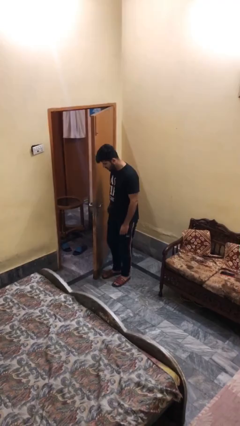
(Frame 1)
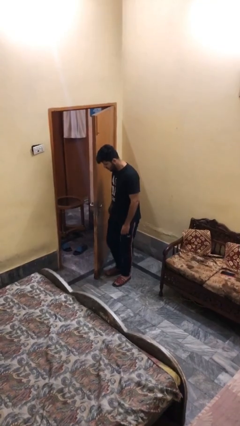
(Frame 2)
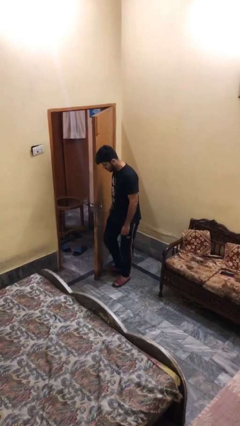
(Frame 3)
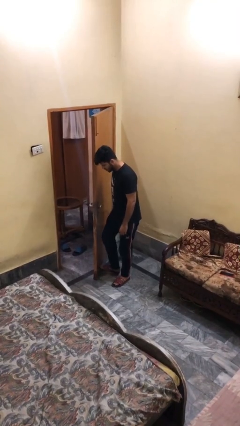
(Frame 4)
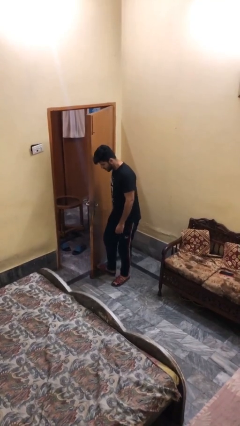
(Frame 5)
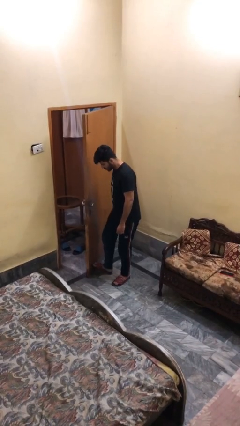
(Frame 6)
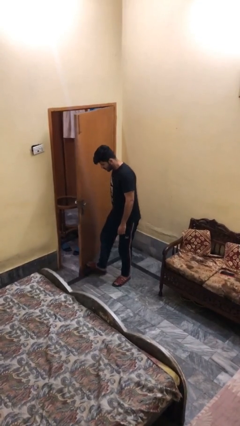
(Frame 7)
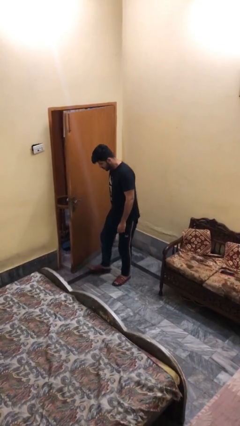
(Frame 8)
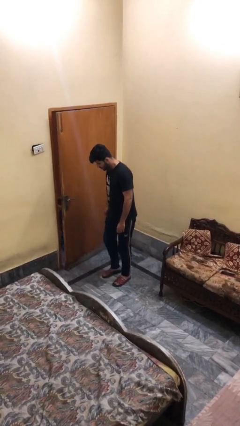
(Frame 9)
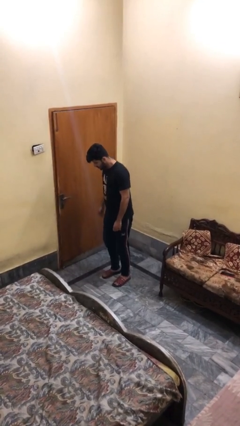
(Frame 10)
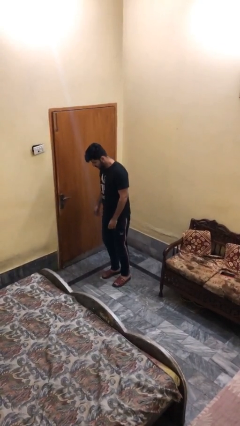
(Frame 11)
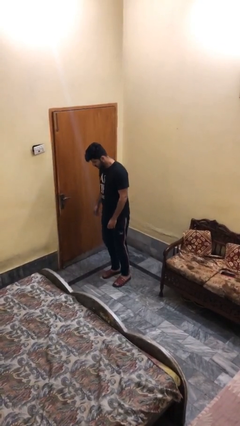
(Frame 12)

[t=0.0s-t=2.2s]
person closes door with foot

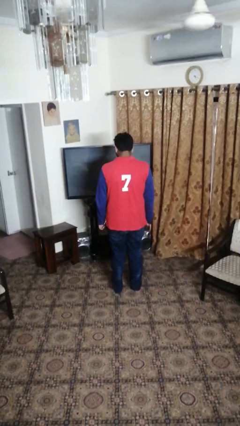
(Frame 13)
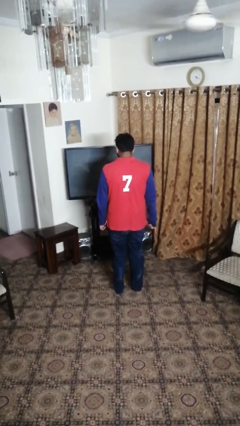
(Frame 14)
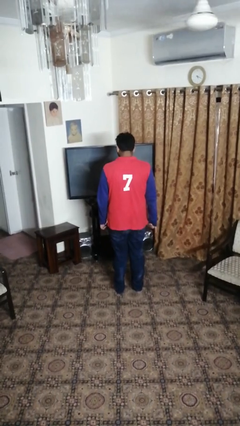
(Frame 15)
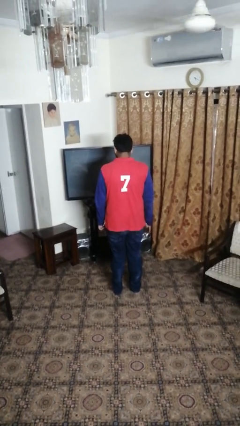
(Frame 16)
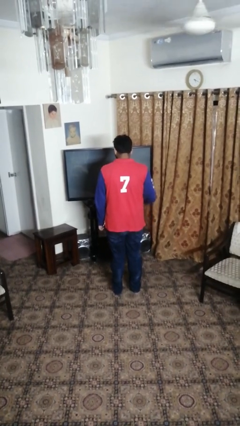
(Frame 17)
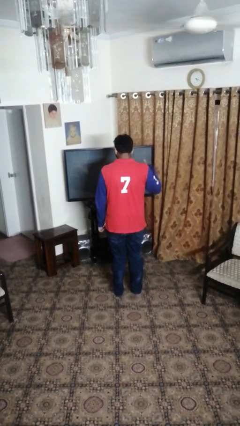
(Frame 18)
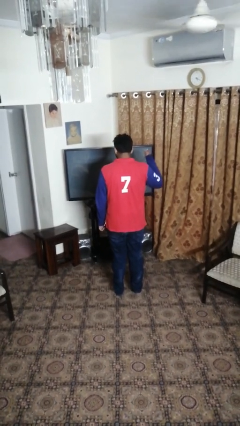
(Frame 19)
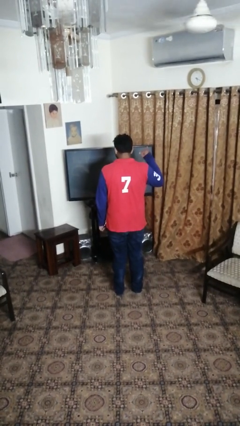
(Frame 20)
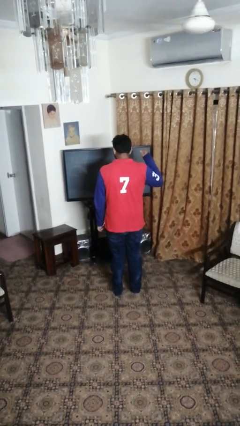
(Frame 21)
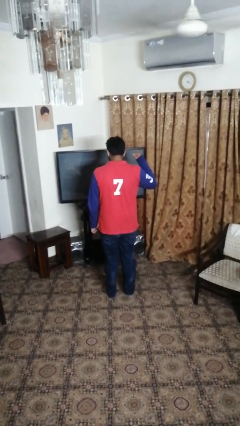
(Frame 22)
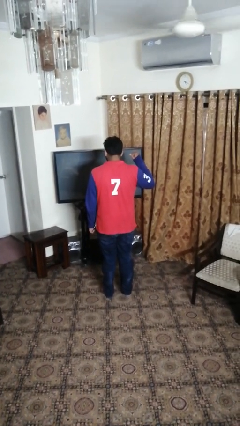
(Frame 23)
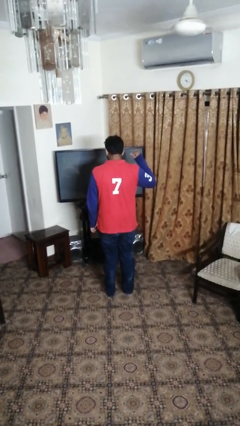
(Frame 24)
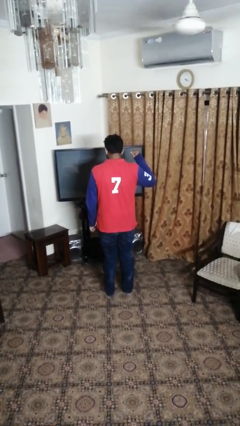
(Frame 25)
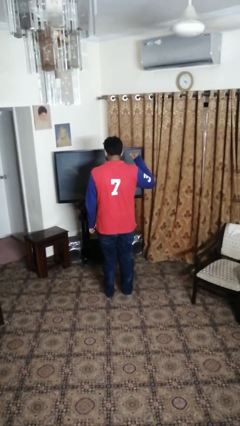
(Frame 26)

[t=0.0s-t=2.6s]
person gestures hang loose

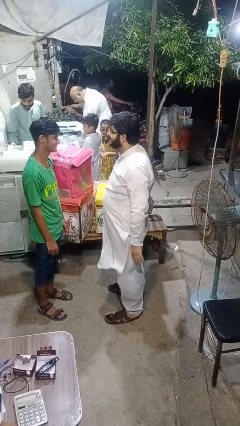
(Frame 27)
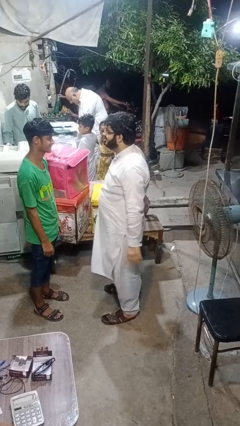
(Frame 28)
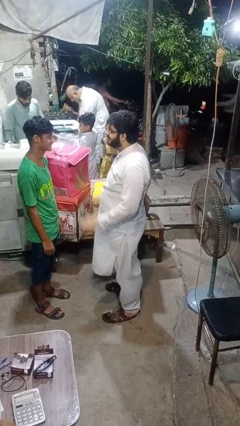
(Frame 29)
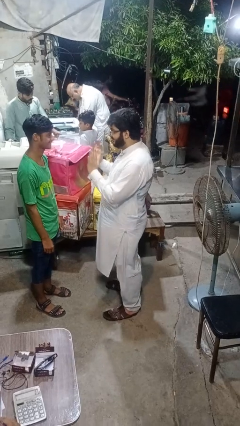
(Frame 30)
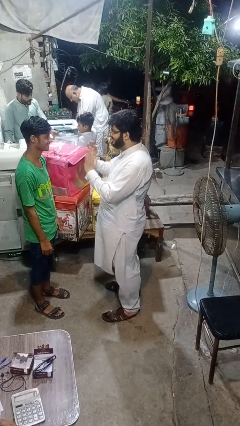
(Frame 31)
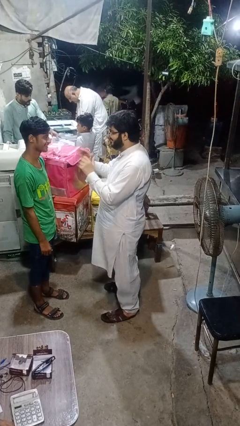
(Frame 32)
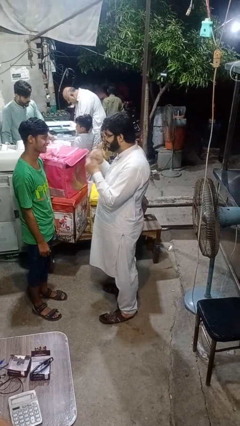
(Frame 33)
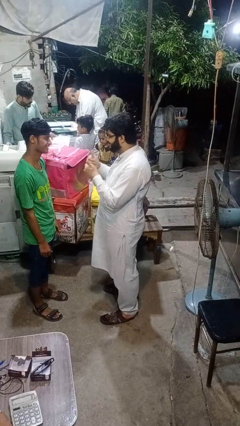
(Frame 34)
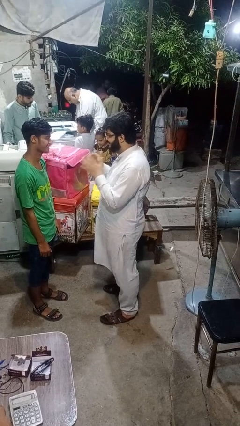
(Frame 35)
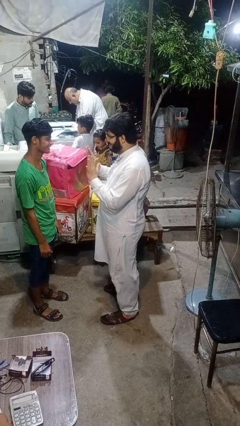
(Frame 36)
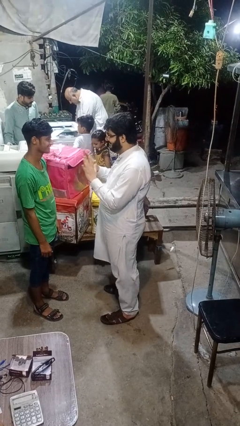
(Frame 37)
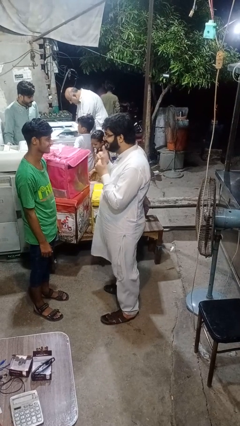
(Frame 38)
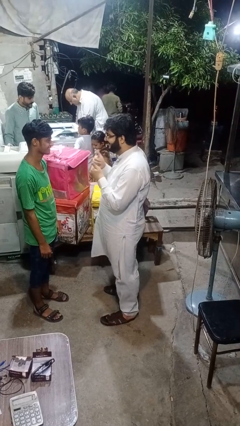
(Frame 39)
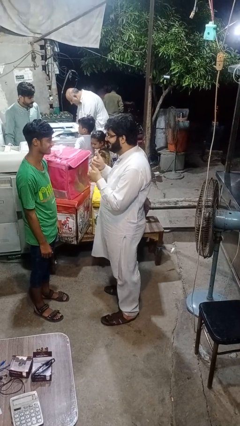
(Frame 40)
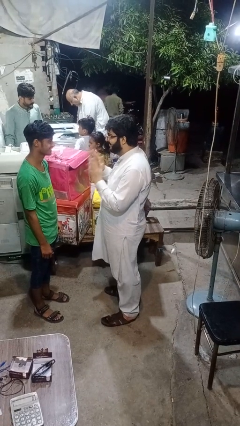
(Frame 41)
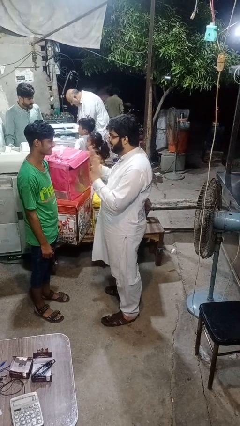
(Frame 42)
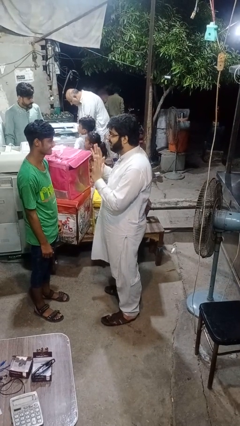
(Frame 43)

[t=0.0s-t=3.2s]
person talks to person

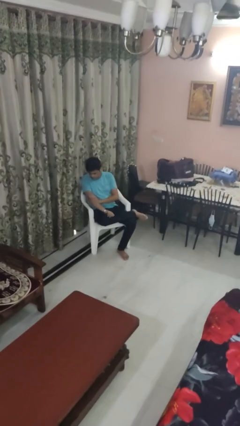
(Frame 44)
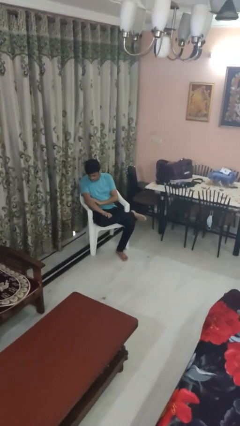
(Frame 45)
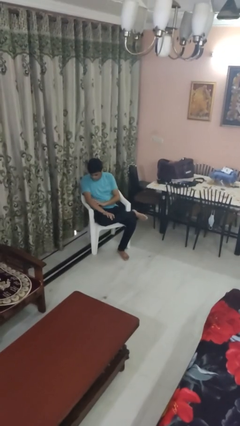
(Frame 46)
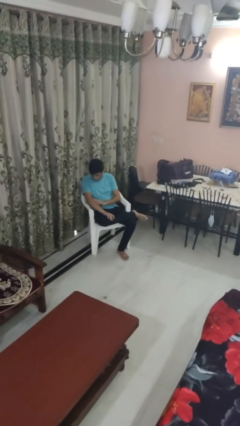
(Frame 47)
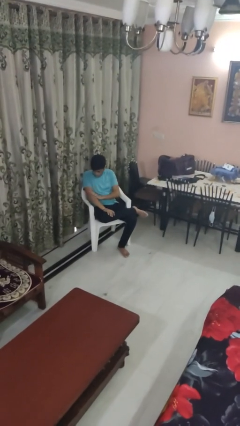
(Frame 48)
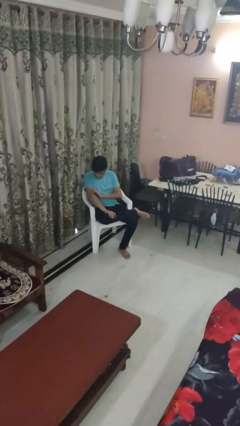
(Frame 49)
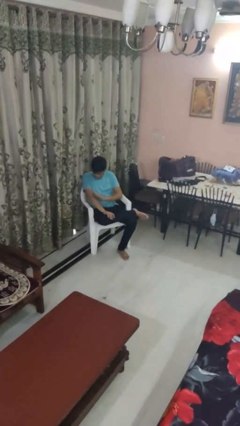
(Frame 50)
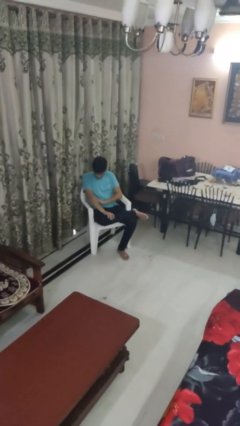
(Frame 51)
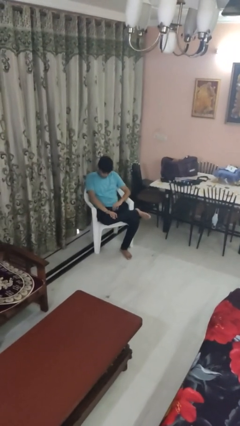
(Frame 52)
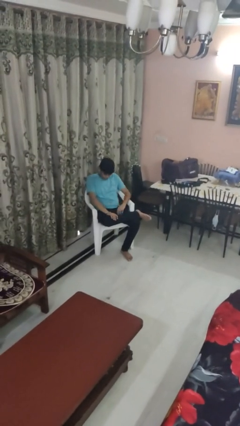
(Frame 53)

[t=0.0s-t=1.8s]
person swats bug

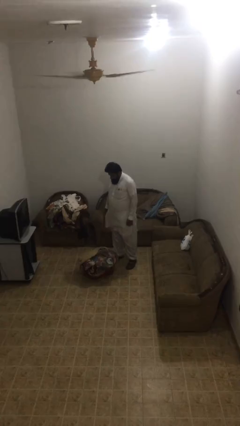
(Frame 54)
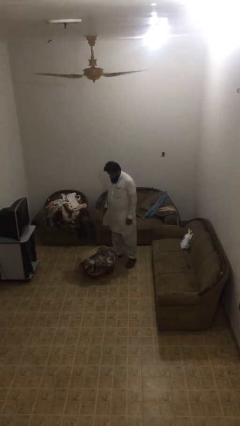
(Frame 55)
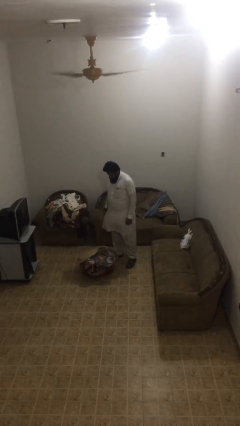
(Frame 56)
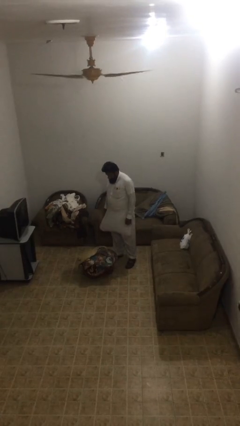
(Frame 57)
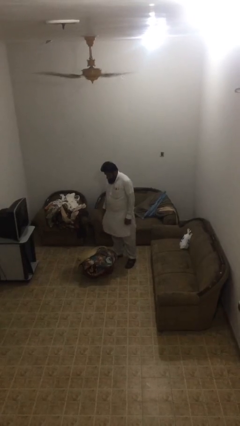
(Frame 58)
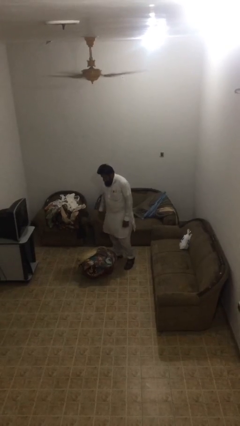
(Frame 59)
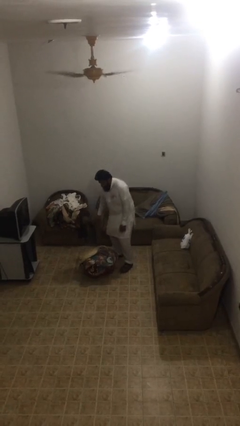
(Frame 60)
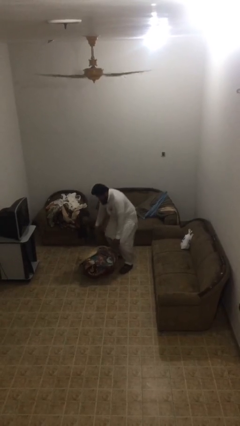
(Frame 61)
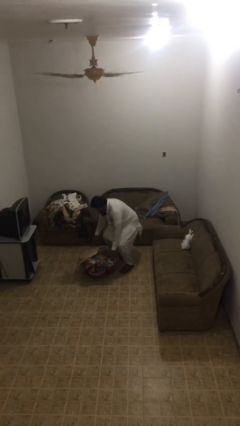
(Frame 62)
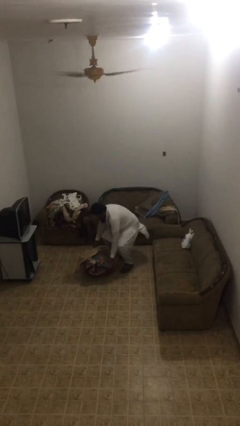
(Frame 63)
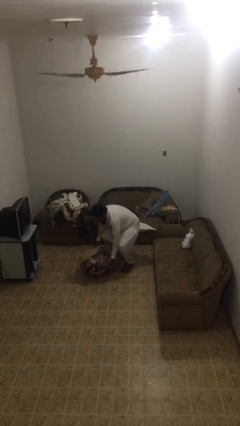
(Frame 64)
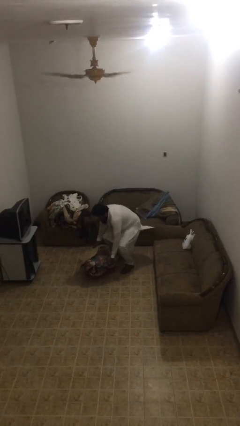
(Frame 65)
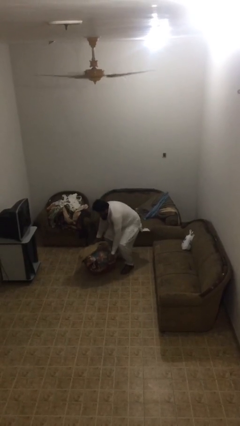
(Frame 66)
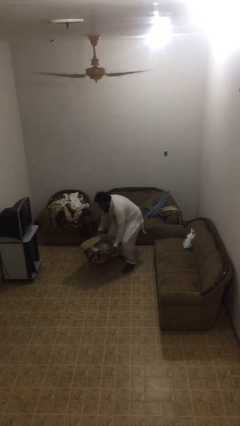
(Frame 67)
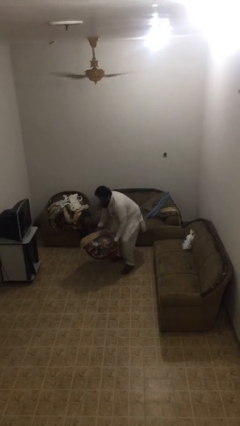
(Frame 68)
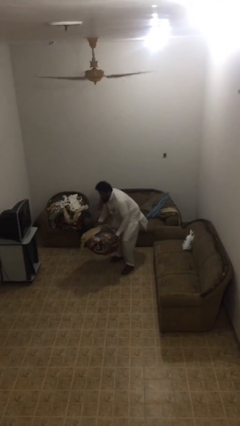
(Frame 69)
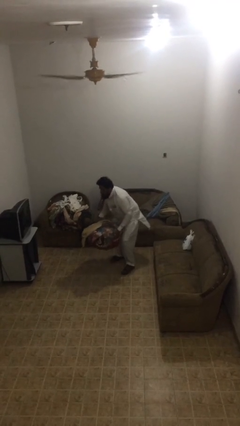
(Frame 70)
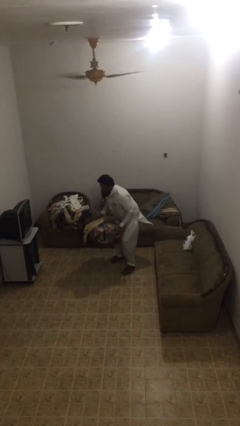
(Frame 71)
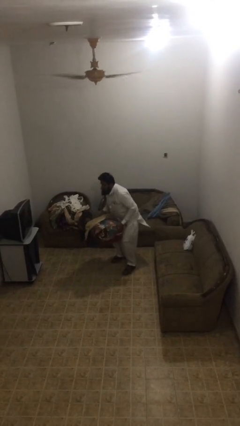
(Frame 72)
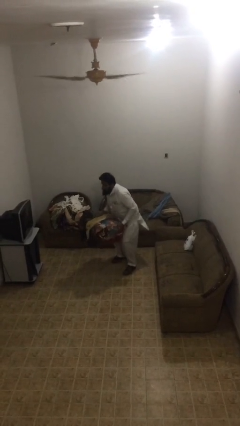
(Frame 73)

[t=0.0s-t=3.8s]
person picks up object from floor

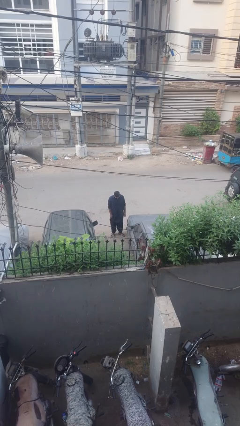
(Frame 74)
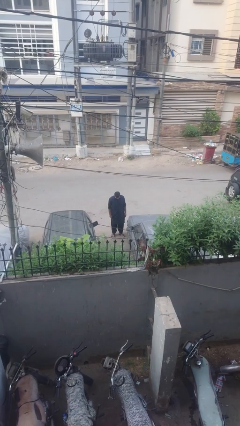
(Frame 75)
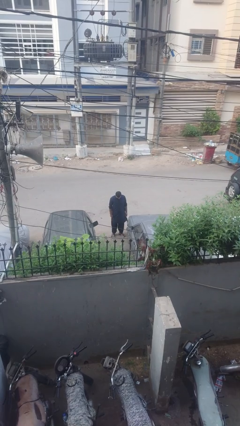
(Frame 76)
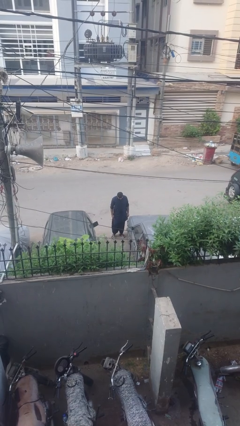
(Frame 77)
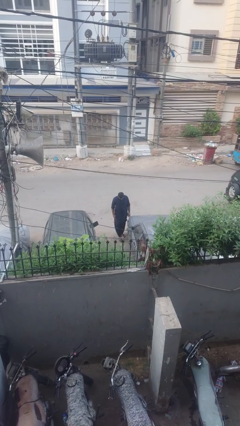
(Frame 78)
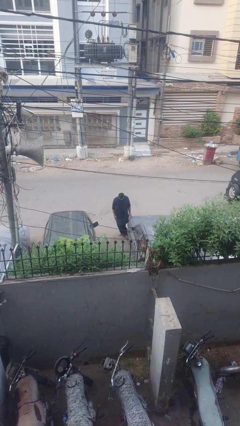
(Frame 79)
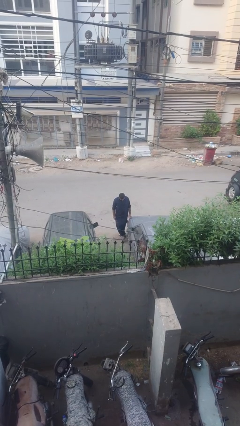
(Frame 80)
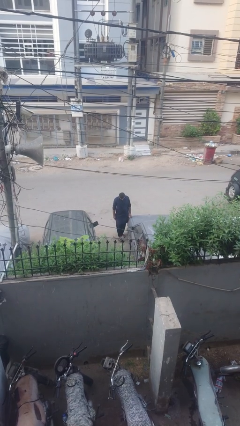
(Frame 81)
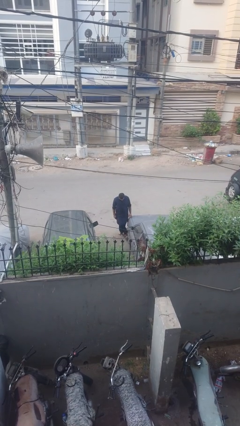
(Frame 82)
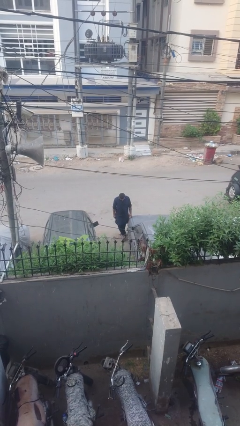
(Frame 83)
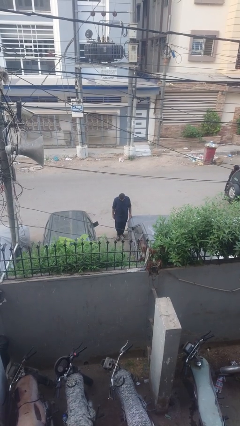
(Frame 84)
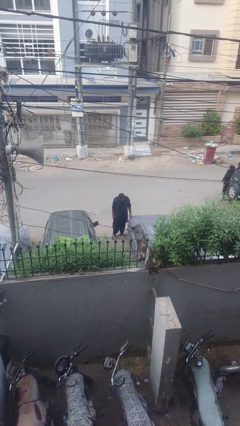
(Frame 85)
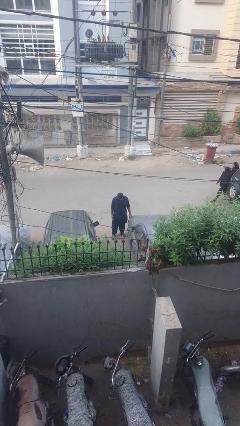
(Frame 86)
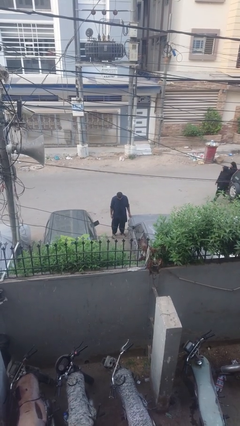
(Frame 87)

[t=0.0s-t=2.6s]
person kicks car tires

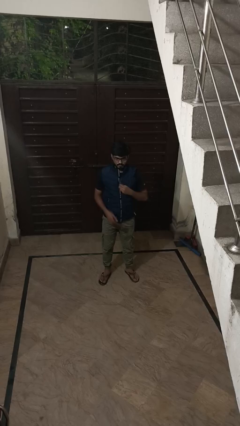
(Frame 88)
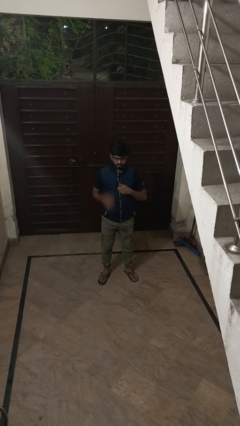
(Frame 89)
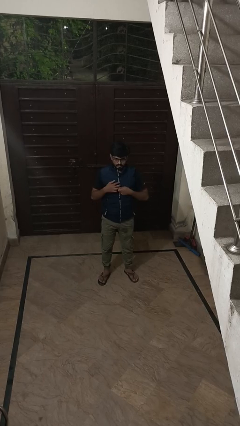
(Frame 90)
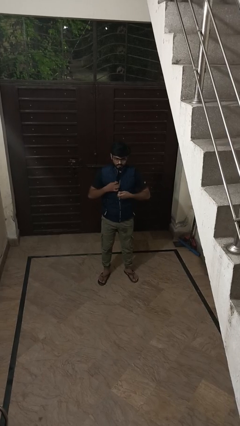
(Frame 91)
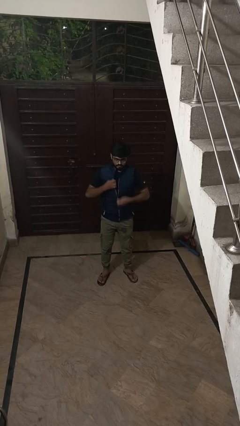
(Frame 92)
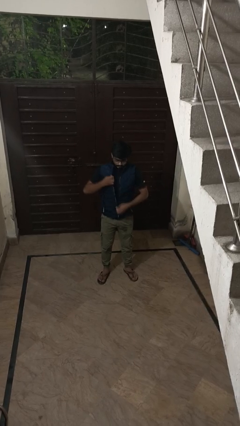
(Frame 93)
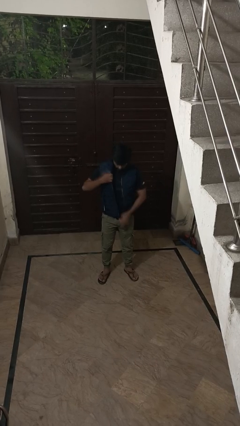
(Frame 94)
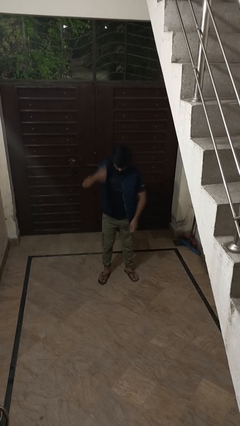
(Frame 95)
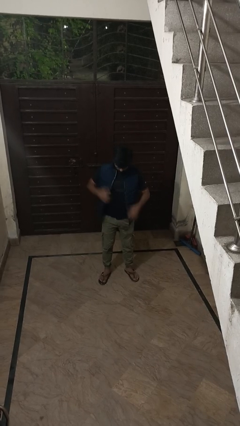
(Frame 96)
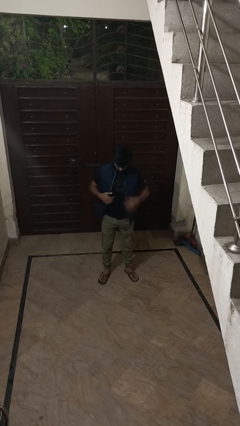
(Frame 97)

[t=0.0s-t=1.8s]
person unzips jacket
